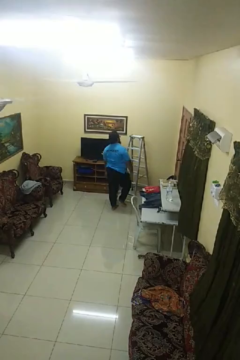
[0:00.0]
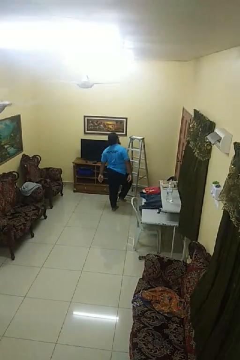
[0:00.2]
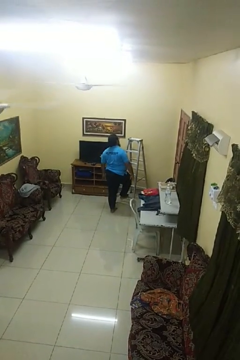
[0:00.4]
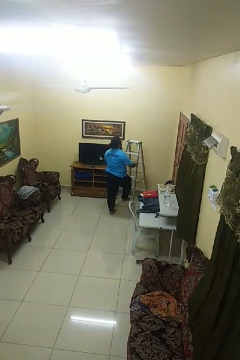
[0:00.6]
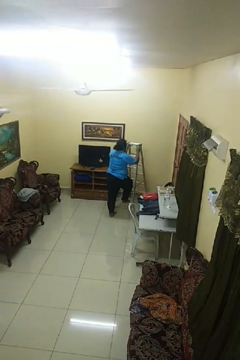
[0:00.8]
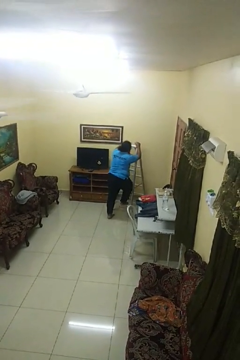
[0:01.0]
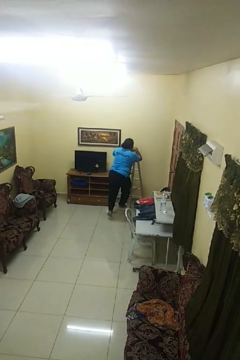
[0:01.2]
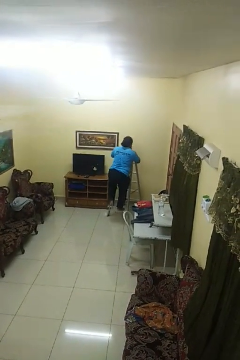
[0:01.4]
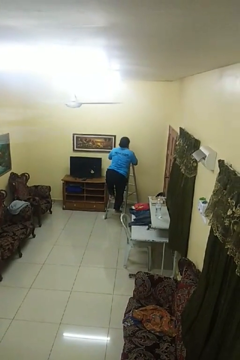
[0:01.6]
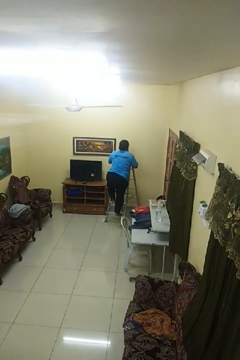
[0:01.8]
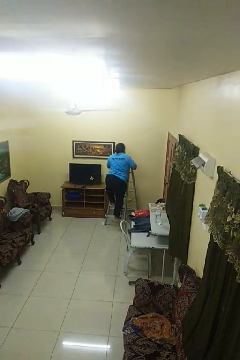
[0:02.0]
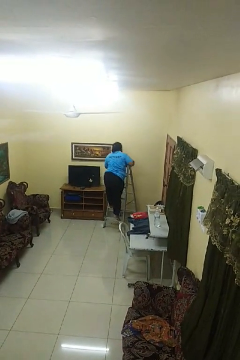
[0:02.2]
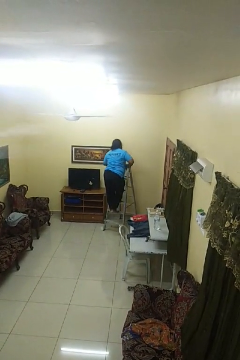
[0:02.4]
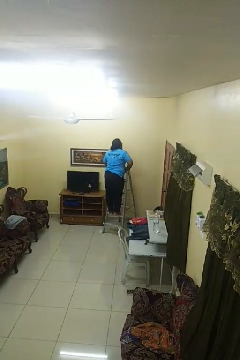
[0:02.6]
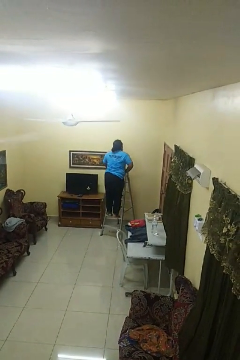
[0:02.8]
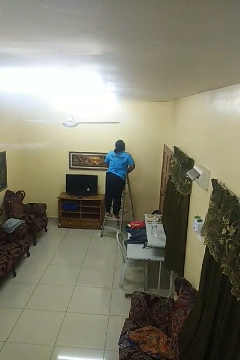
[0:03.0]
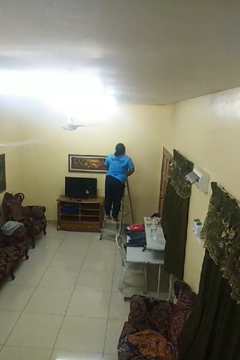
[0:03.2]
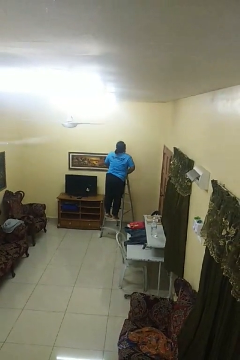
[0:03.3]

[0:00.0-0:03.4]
person climbs up ladder

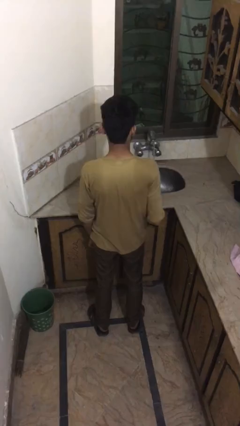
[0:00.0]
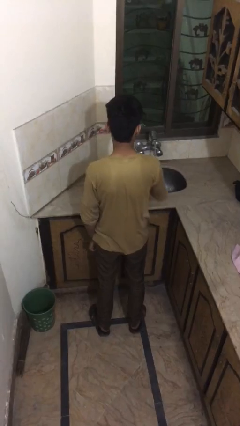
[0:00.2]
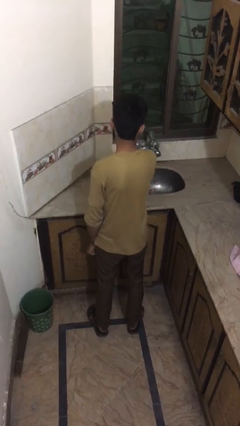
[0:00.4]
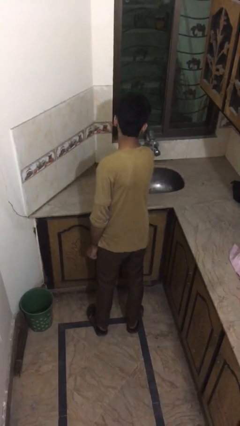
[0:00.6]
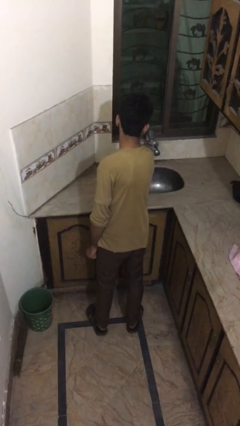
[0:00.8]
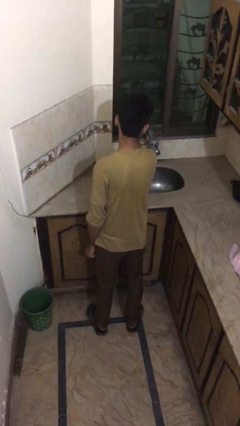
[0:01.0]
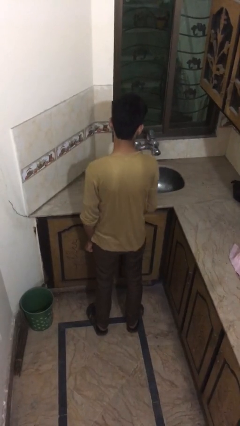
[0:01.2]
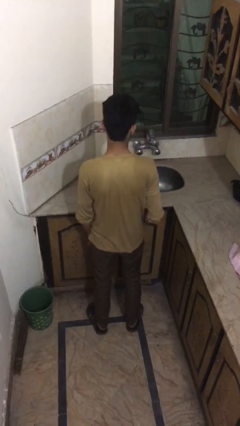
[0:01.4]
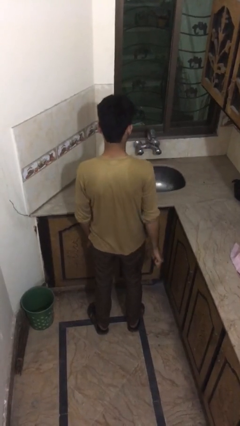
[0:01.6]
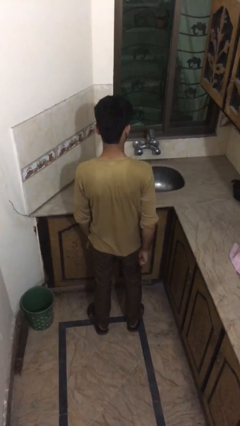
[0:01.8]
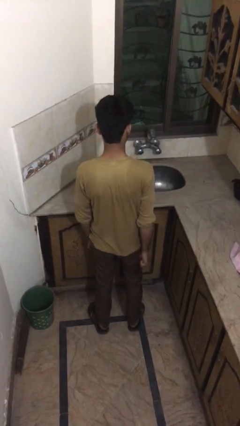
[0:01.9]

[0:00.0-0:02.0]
person turns off faucet

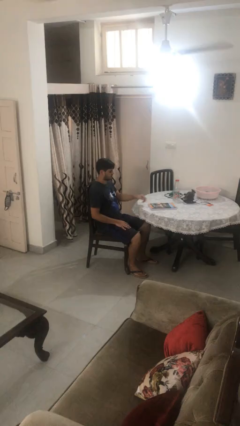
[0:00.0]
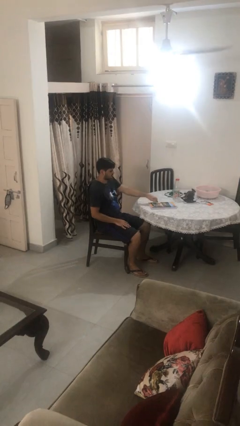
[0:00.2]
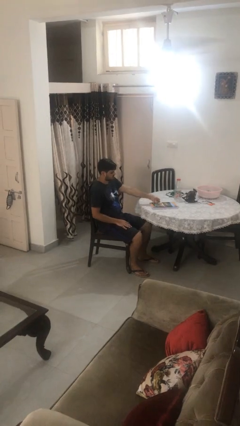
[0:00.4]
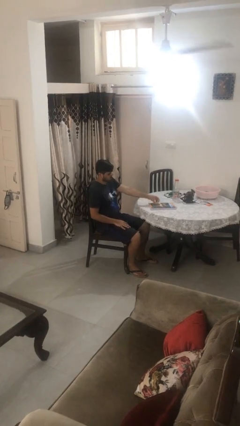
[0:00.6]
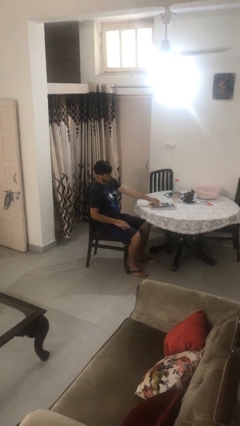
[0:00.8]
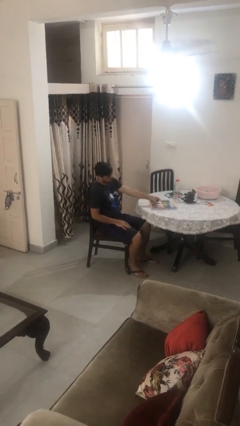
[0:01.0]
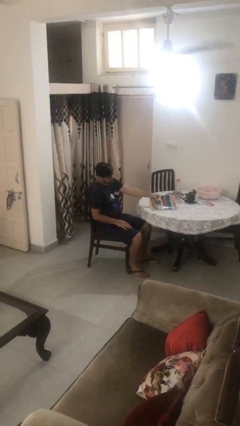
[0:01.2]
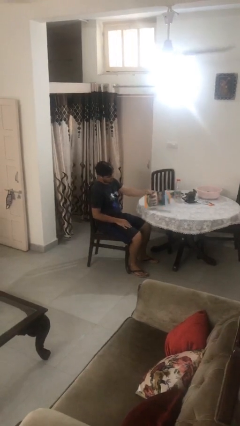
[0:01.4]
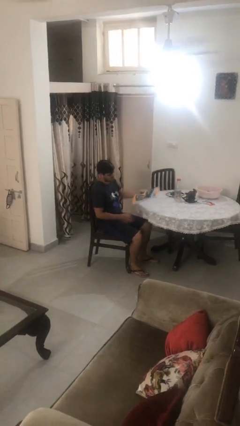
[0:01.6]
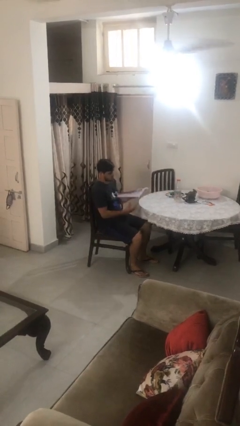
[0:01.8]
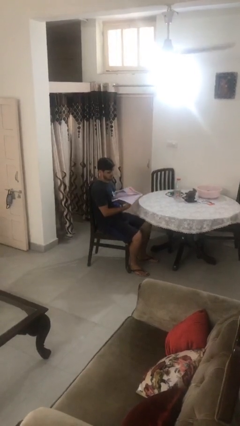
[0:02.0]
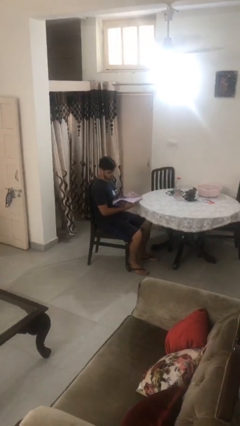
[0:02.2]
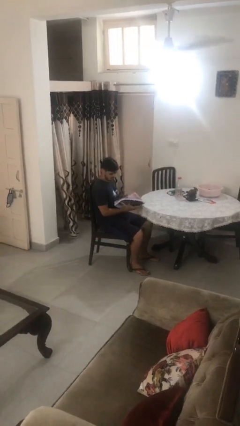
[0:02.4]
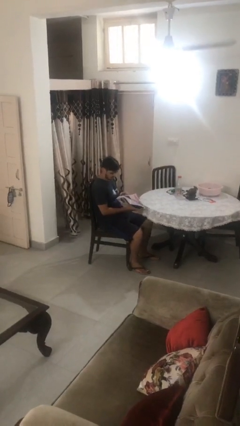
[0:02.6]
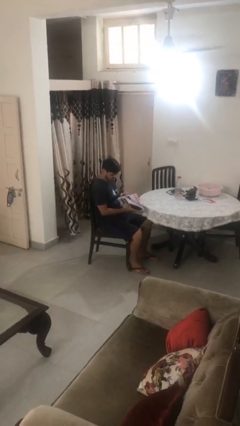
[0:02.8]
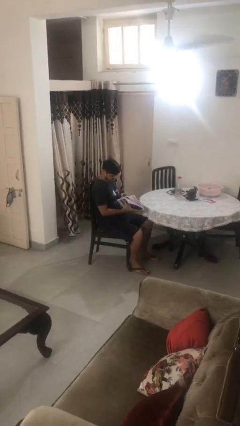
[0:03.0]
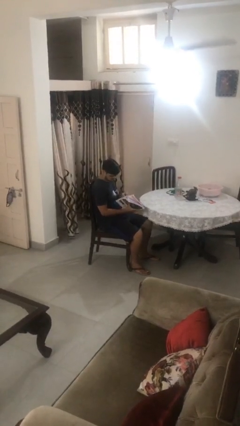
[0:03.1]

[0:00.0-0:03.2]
person picks up object from table

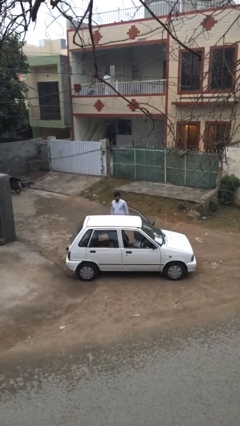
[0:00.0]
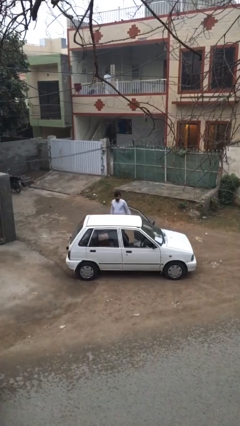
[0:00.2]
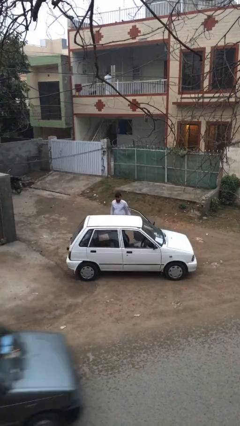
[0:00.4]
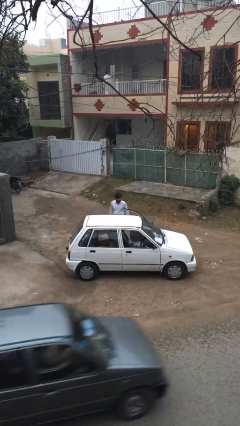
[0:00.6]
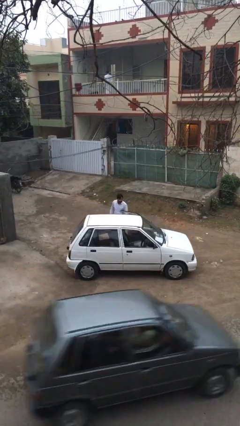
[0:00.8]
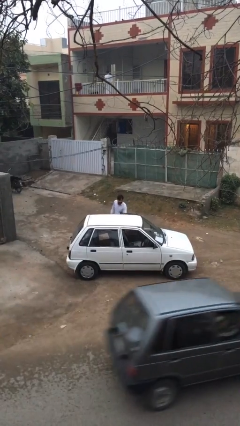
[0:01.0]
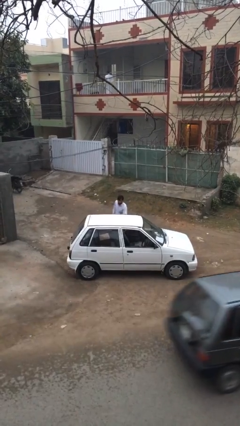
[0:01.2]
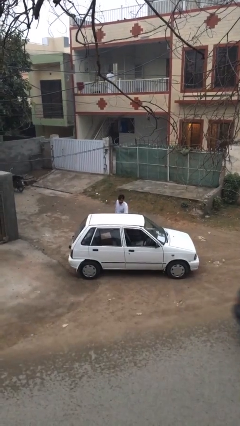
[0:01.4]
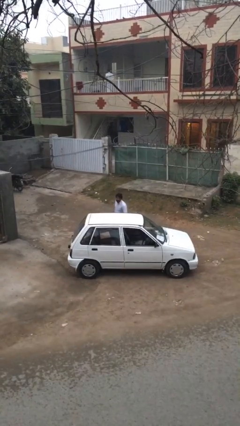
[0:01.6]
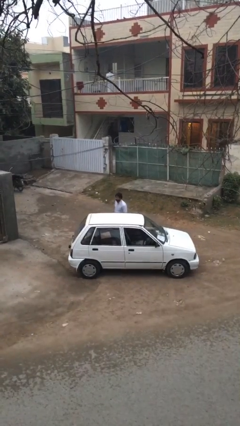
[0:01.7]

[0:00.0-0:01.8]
person closes car door

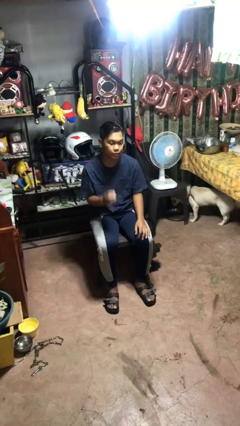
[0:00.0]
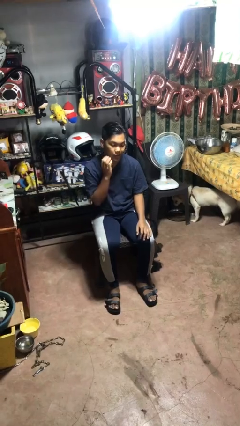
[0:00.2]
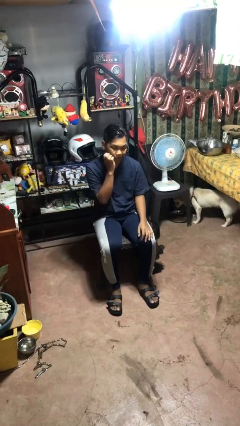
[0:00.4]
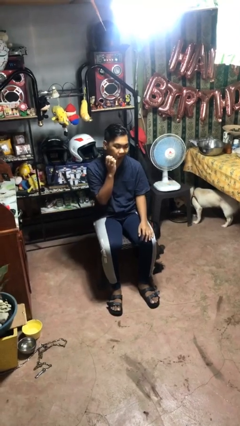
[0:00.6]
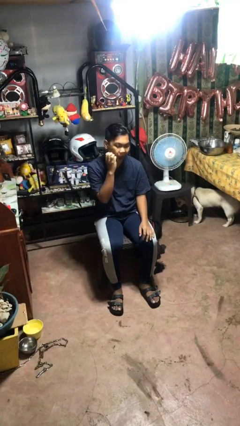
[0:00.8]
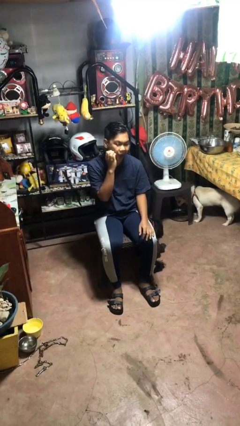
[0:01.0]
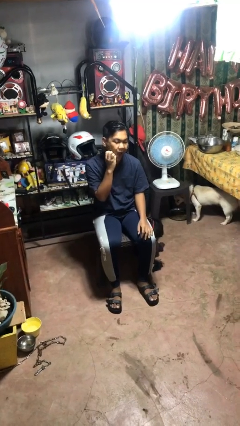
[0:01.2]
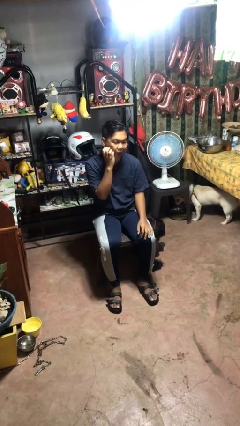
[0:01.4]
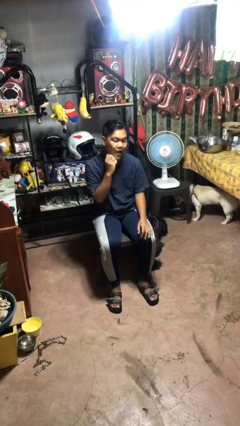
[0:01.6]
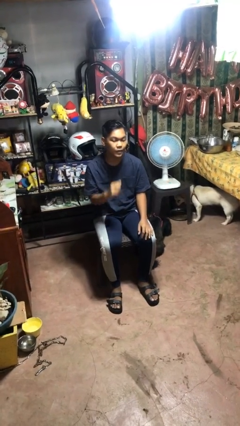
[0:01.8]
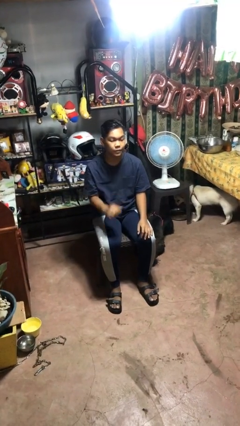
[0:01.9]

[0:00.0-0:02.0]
person scratches face

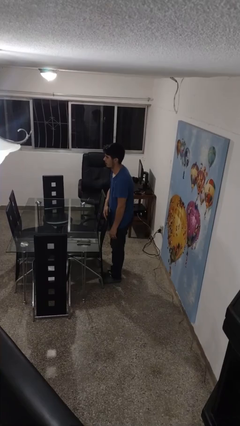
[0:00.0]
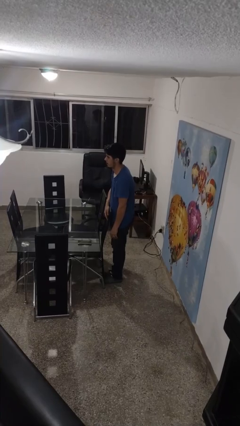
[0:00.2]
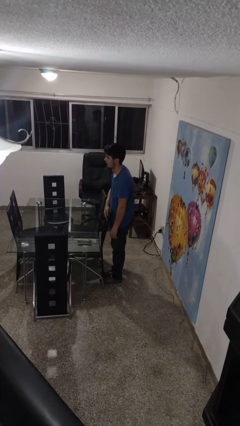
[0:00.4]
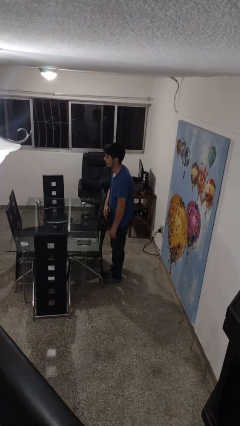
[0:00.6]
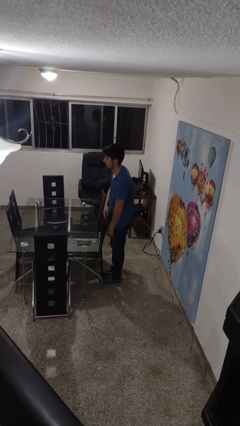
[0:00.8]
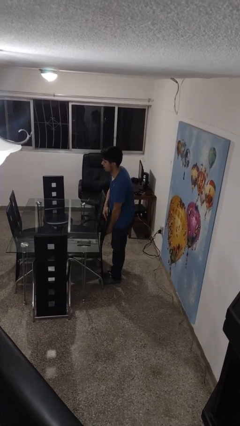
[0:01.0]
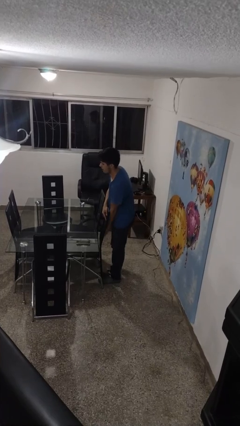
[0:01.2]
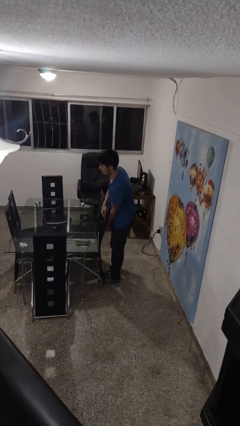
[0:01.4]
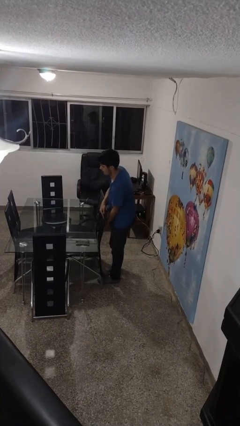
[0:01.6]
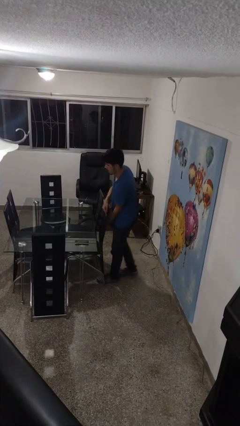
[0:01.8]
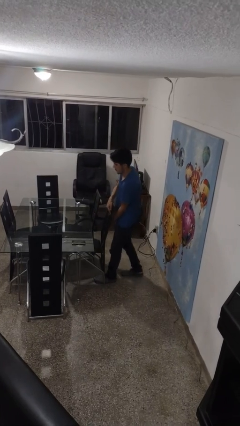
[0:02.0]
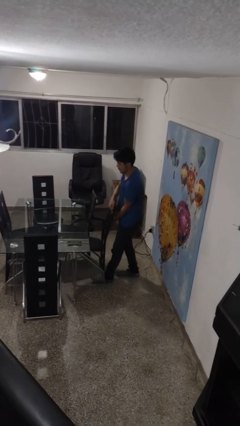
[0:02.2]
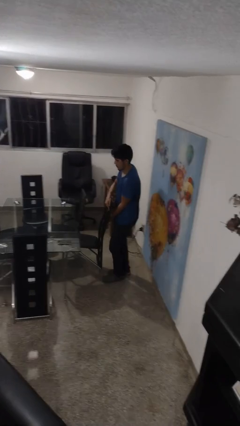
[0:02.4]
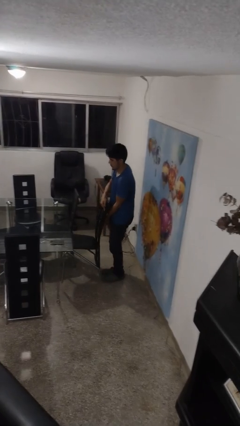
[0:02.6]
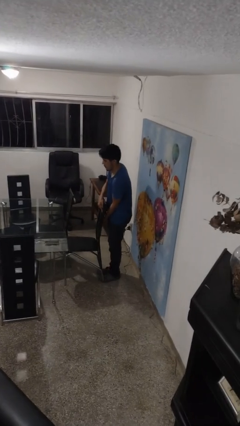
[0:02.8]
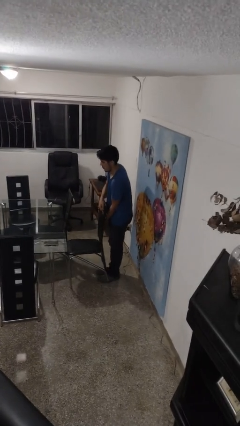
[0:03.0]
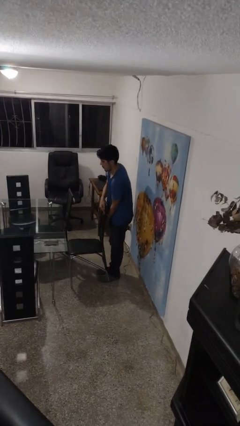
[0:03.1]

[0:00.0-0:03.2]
person pulls out chair

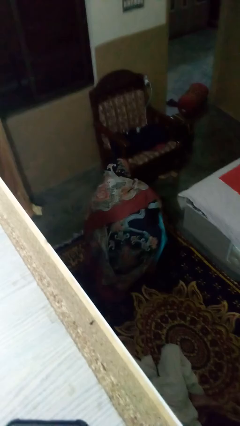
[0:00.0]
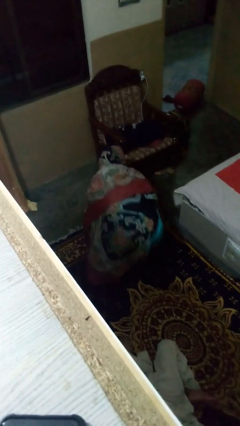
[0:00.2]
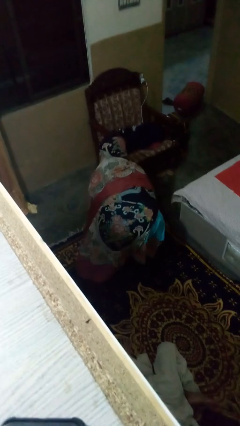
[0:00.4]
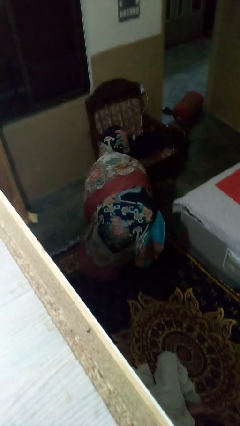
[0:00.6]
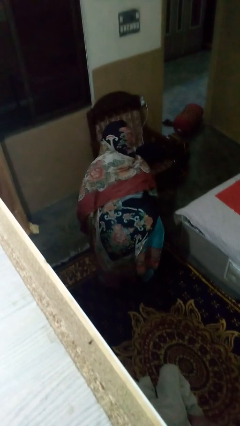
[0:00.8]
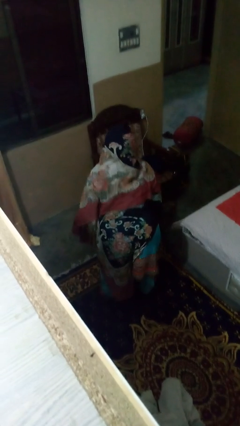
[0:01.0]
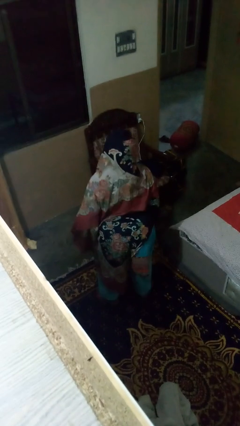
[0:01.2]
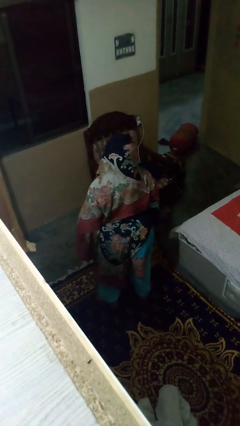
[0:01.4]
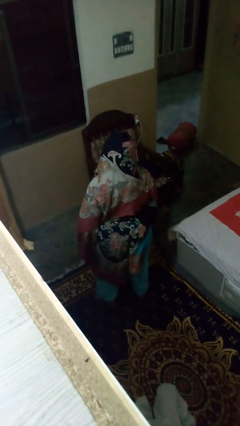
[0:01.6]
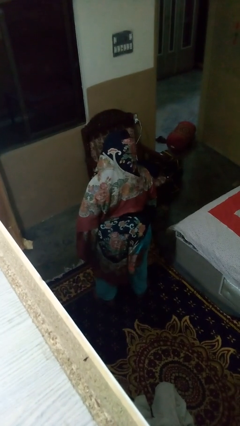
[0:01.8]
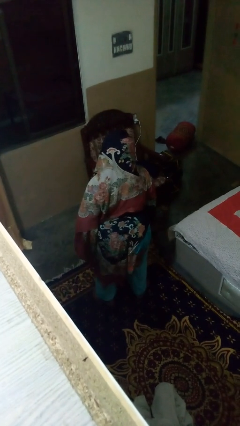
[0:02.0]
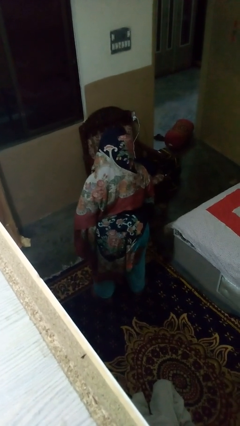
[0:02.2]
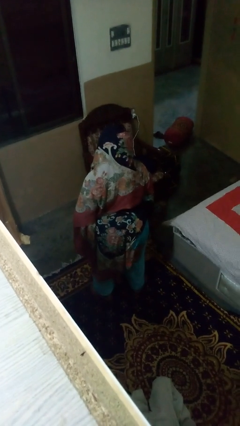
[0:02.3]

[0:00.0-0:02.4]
person stands up

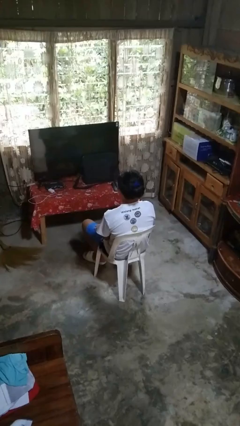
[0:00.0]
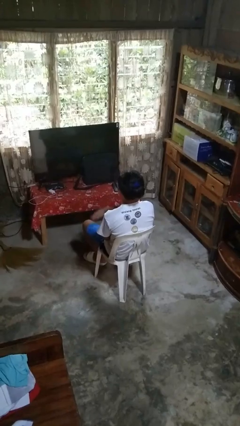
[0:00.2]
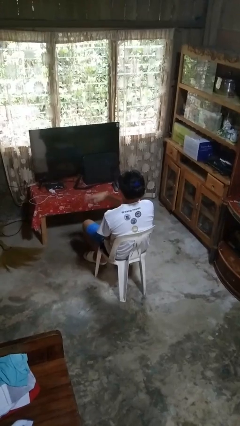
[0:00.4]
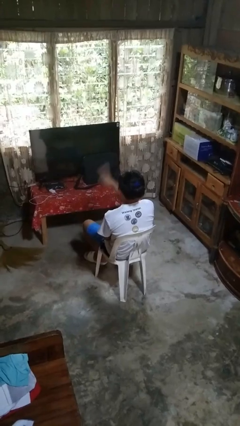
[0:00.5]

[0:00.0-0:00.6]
person gestures swipe right
